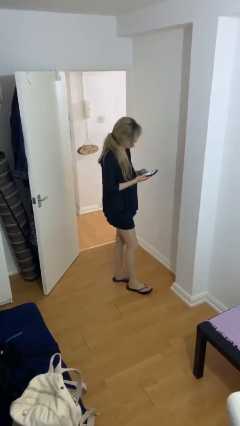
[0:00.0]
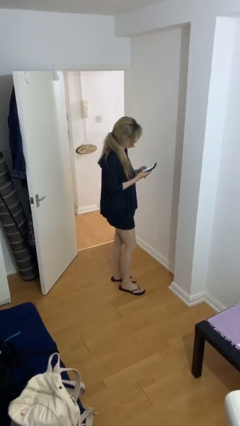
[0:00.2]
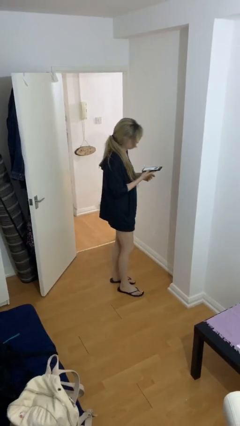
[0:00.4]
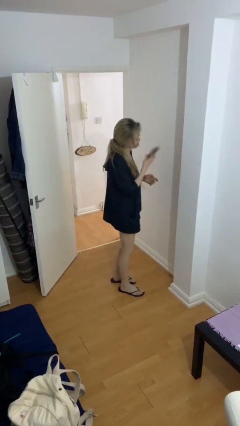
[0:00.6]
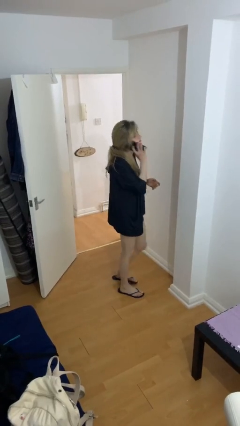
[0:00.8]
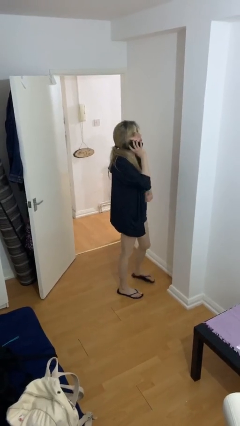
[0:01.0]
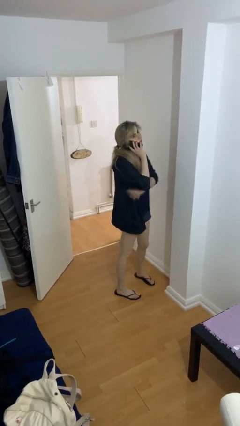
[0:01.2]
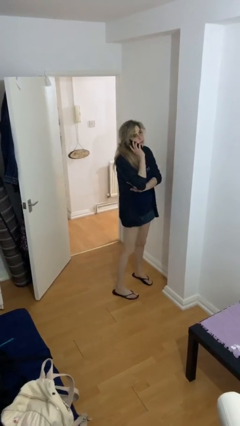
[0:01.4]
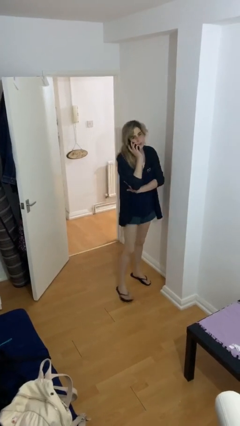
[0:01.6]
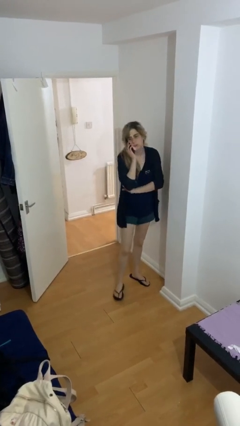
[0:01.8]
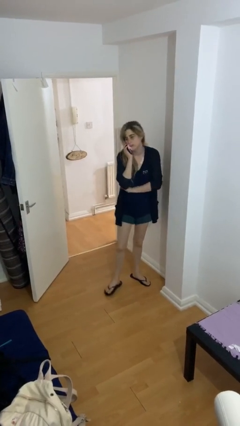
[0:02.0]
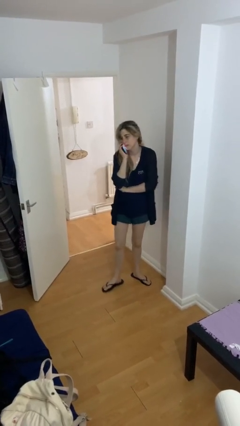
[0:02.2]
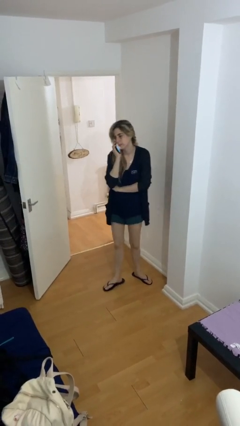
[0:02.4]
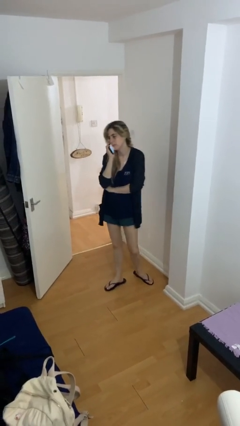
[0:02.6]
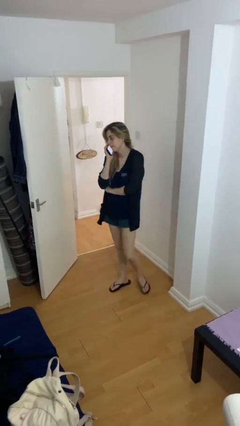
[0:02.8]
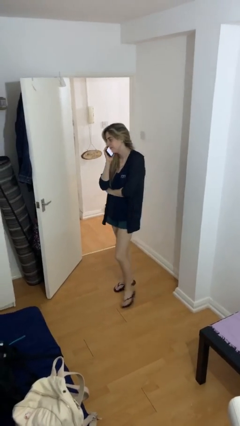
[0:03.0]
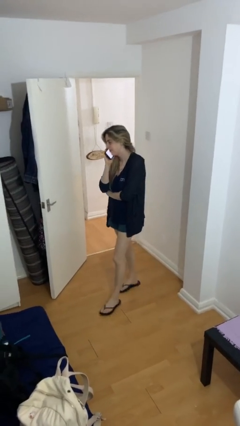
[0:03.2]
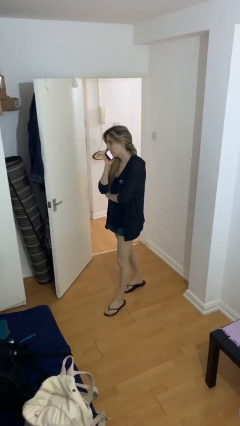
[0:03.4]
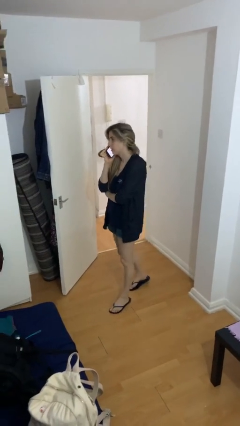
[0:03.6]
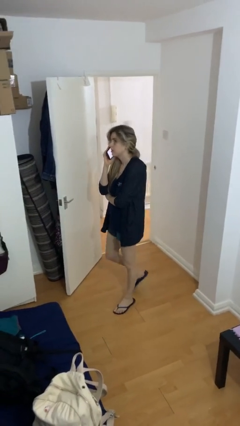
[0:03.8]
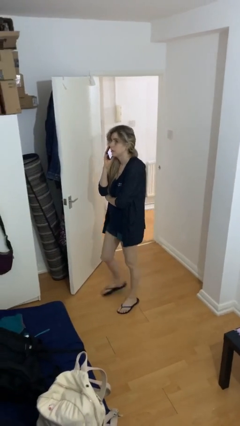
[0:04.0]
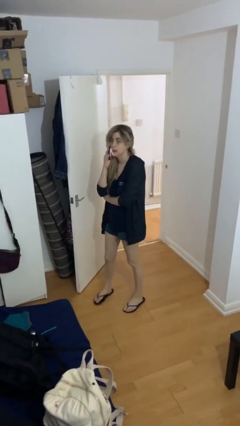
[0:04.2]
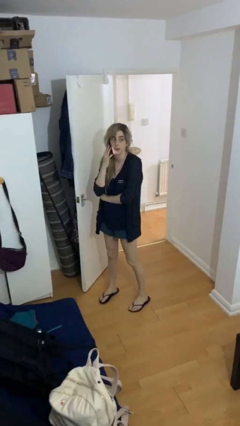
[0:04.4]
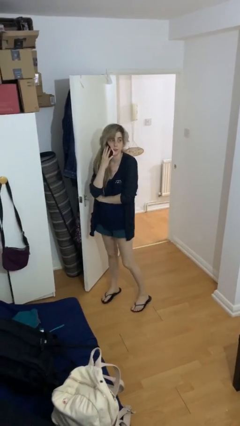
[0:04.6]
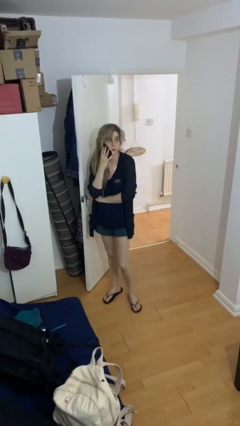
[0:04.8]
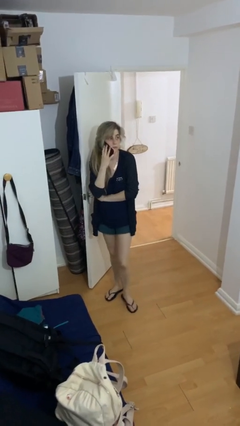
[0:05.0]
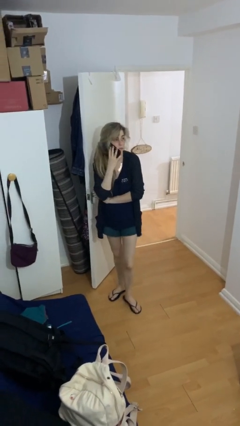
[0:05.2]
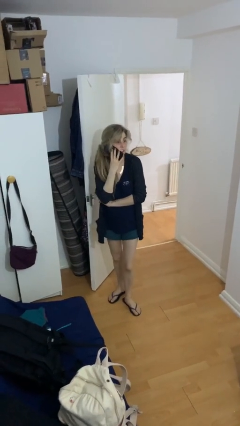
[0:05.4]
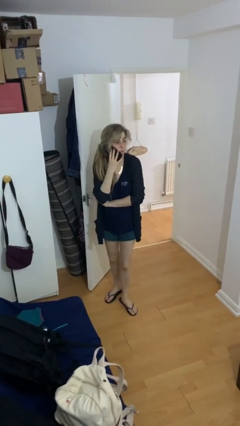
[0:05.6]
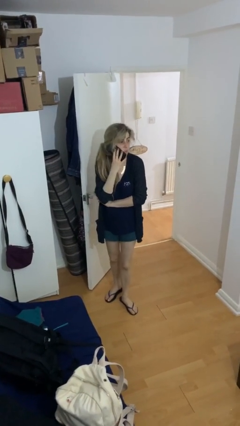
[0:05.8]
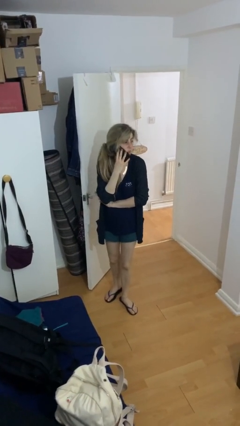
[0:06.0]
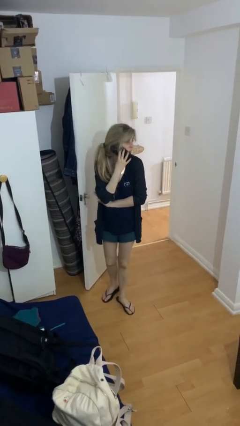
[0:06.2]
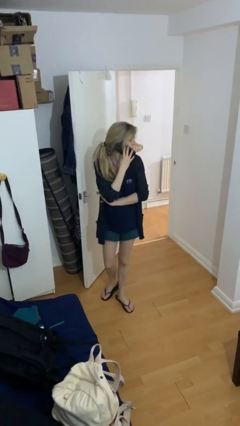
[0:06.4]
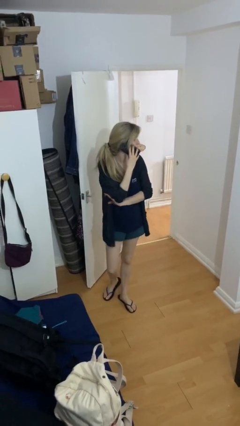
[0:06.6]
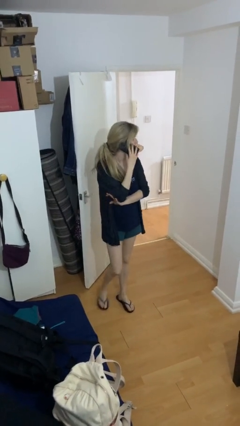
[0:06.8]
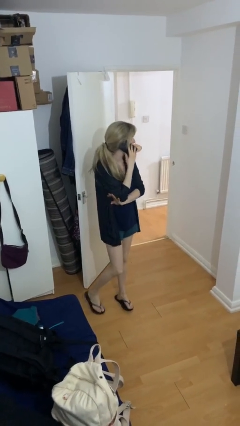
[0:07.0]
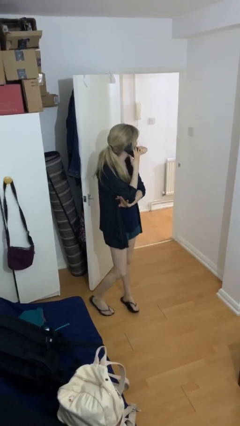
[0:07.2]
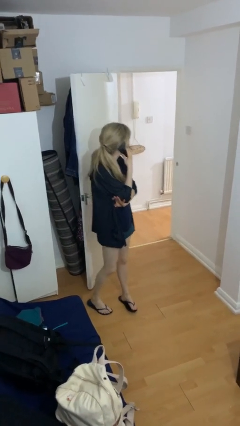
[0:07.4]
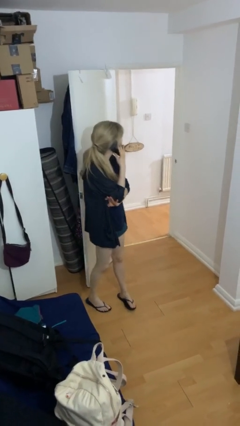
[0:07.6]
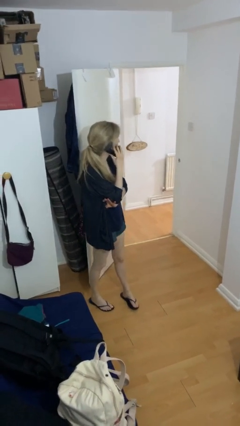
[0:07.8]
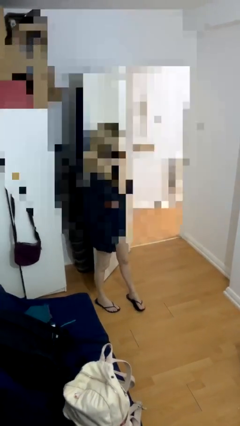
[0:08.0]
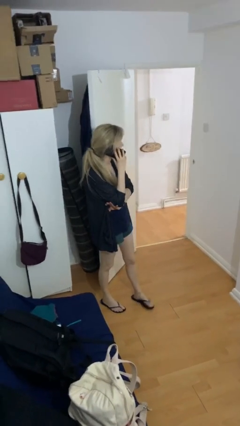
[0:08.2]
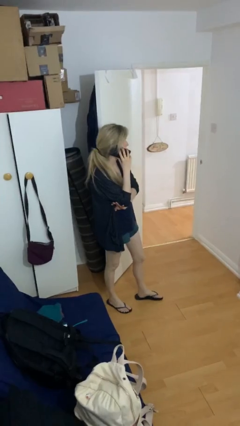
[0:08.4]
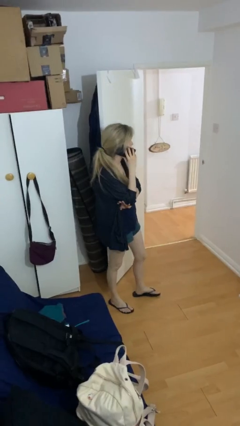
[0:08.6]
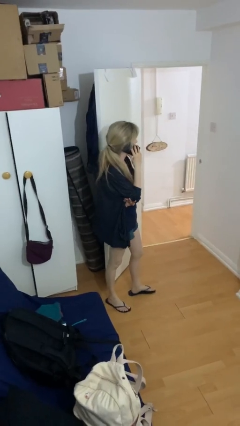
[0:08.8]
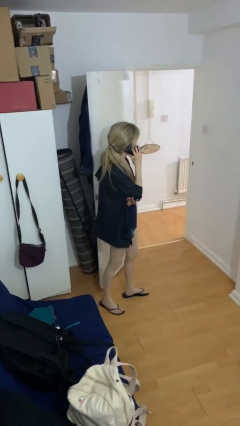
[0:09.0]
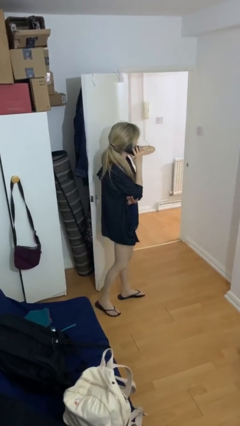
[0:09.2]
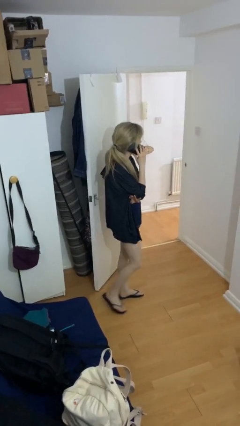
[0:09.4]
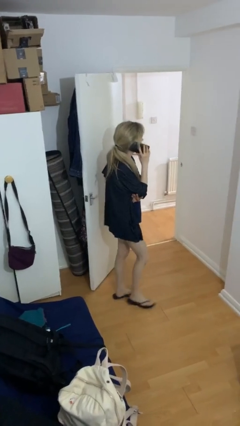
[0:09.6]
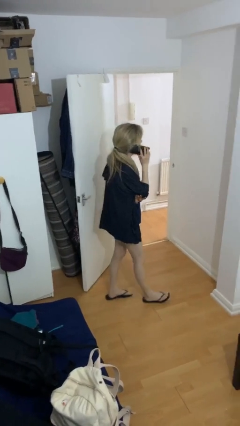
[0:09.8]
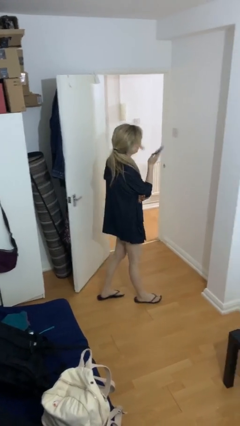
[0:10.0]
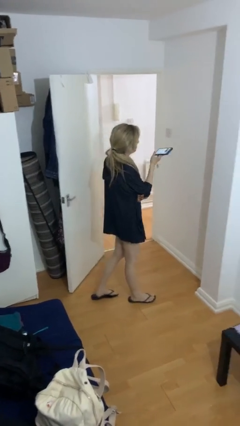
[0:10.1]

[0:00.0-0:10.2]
person talks on phone

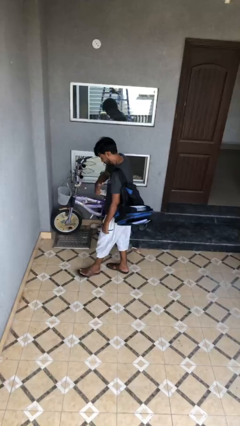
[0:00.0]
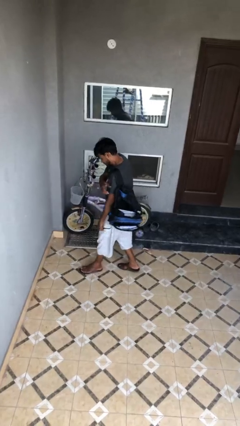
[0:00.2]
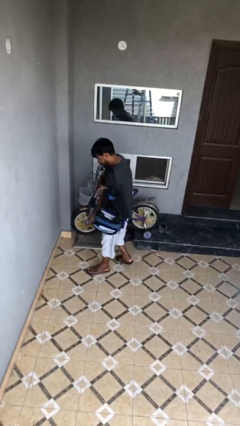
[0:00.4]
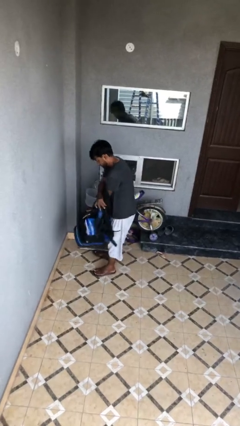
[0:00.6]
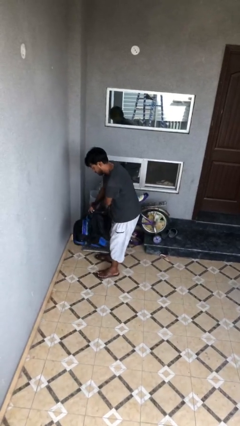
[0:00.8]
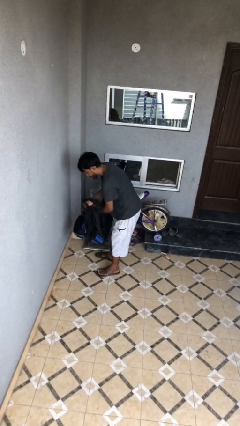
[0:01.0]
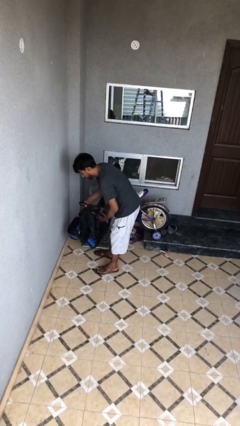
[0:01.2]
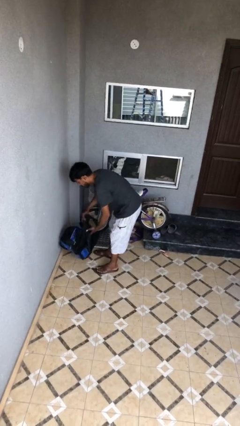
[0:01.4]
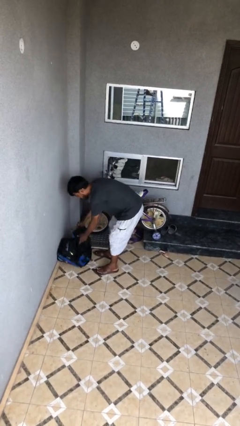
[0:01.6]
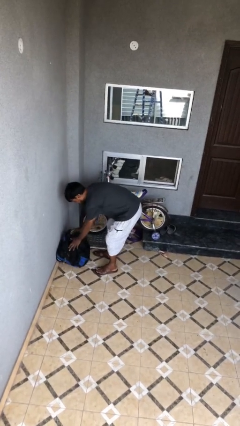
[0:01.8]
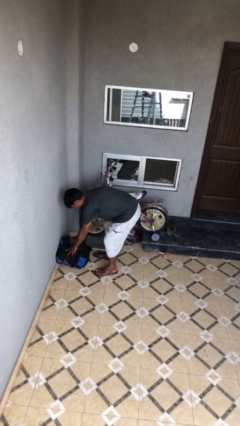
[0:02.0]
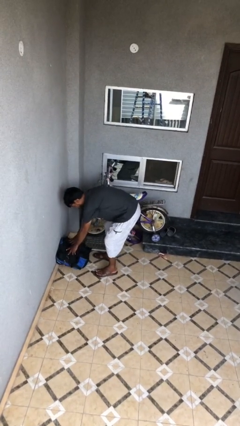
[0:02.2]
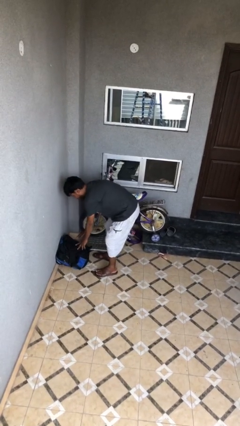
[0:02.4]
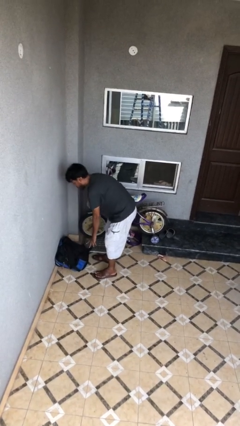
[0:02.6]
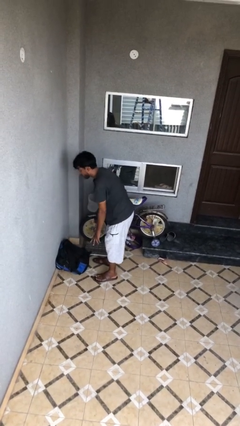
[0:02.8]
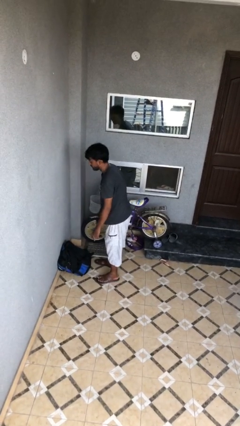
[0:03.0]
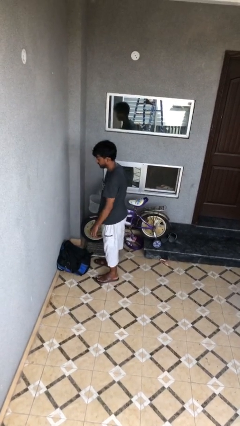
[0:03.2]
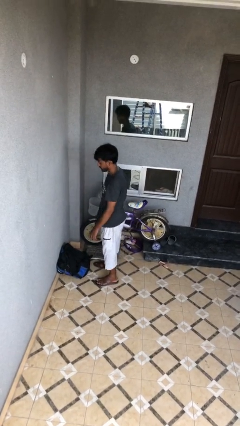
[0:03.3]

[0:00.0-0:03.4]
person puts down object on floor

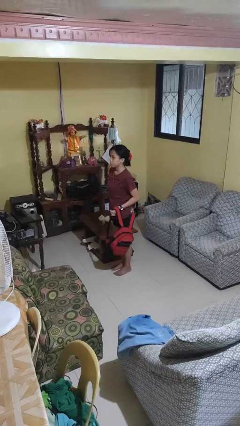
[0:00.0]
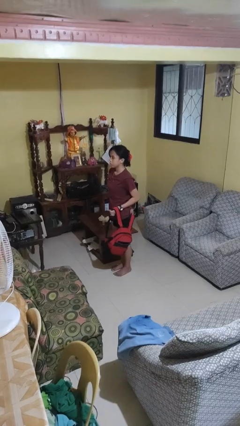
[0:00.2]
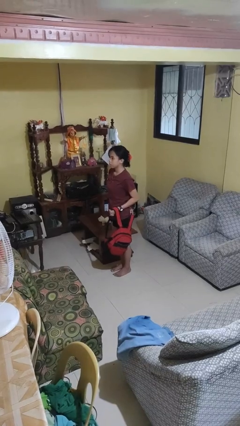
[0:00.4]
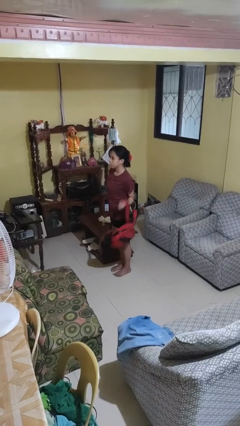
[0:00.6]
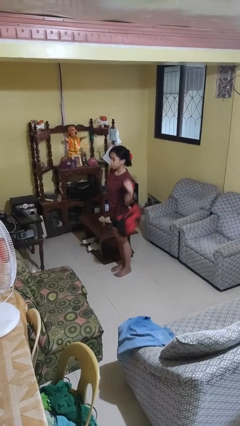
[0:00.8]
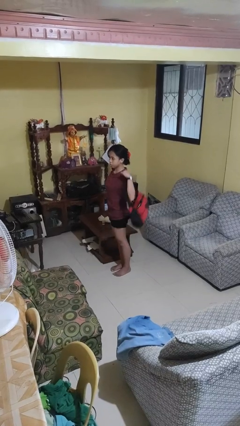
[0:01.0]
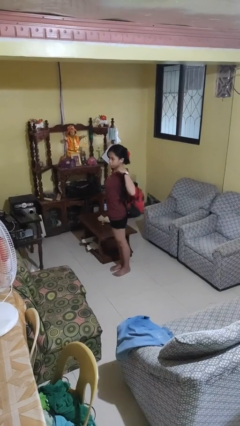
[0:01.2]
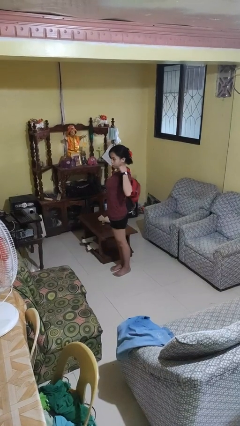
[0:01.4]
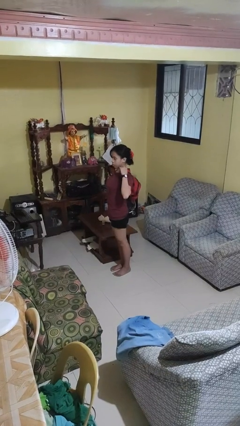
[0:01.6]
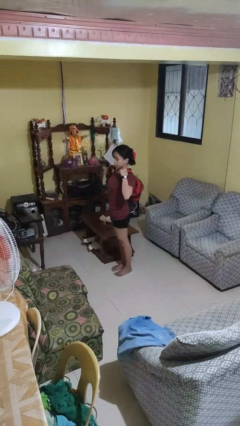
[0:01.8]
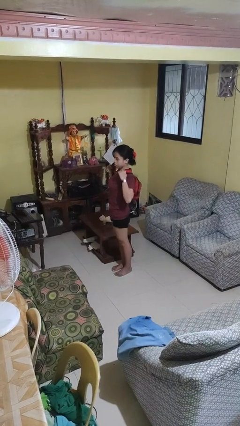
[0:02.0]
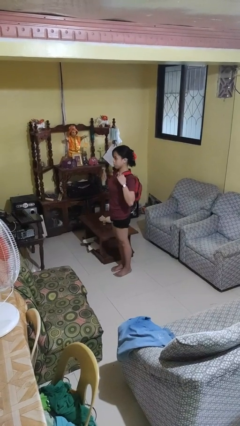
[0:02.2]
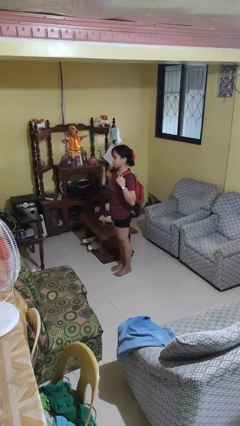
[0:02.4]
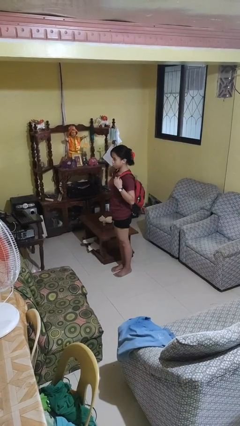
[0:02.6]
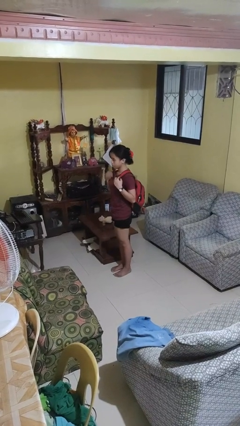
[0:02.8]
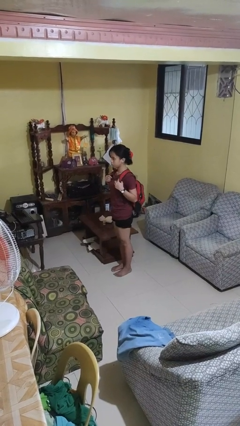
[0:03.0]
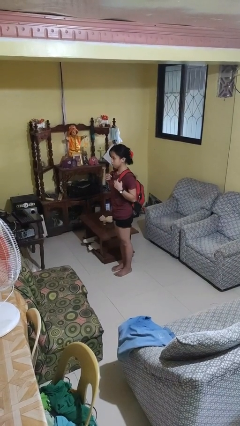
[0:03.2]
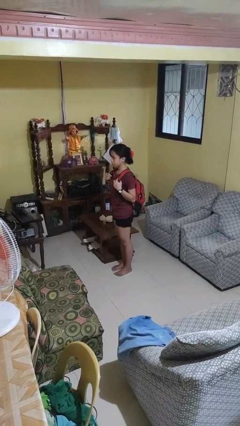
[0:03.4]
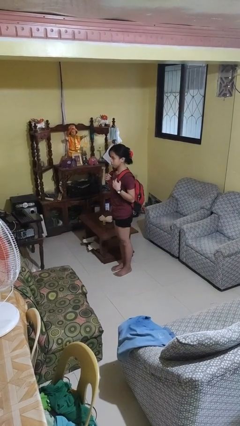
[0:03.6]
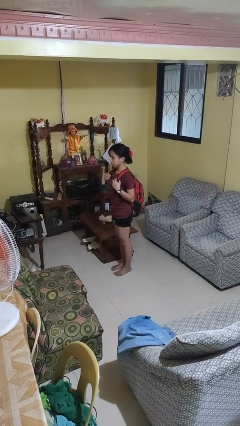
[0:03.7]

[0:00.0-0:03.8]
person puts on backpack

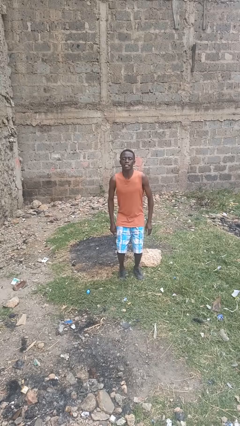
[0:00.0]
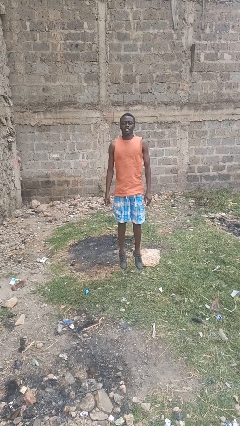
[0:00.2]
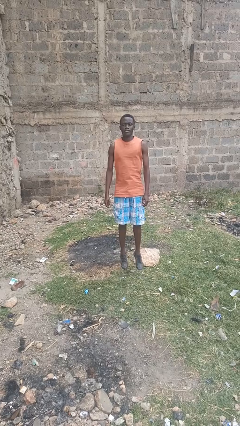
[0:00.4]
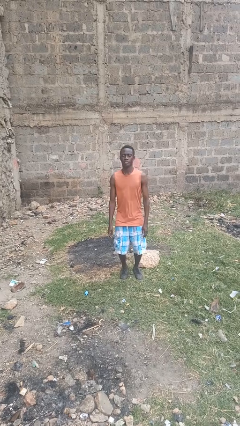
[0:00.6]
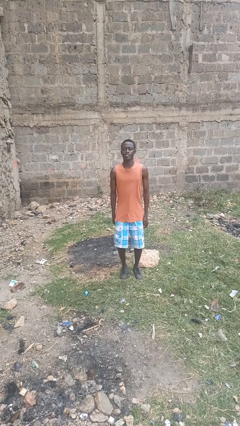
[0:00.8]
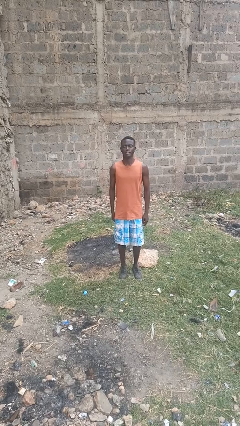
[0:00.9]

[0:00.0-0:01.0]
person jumps
